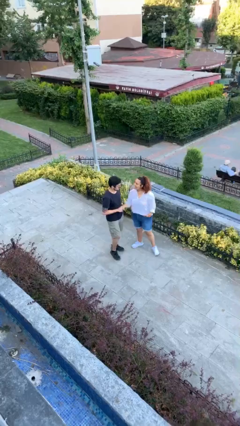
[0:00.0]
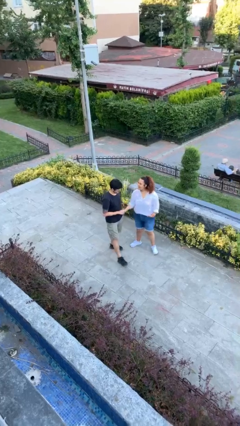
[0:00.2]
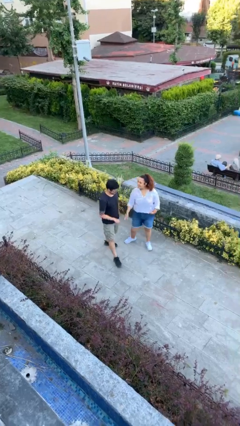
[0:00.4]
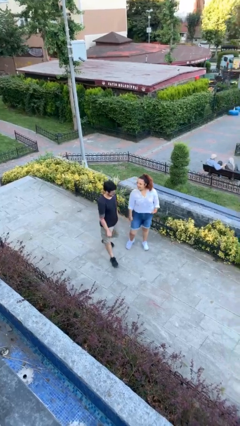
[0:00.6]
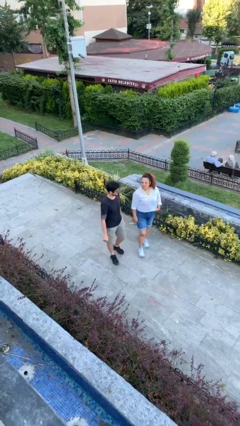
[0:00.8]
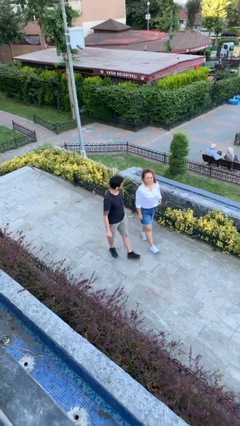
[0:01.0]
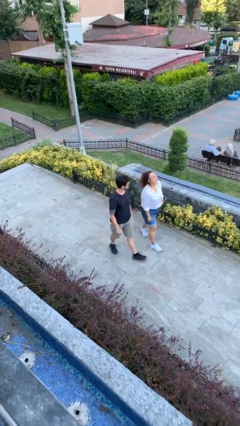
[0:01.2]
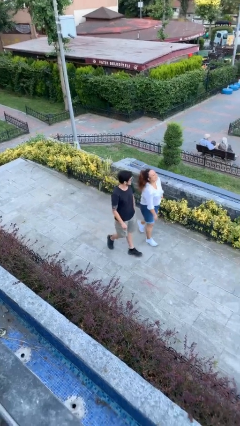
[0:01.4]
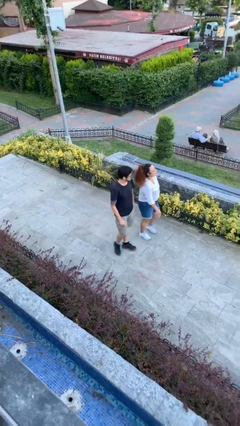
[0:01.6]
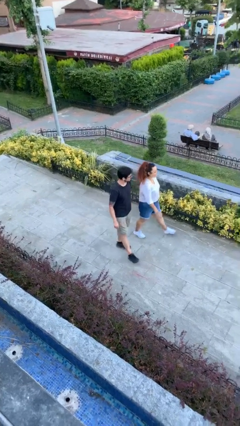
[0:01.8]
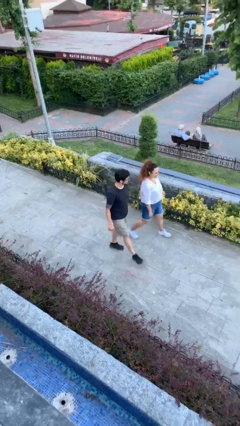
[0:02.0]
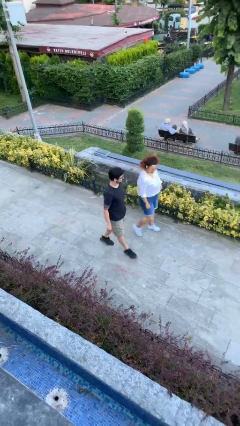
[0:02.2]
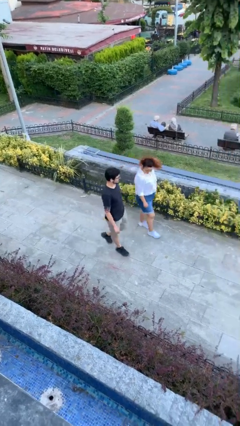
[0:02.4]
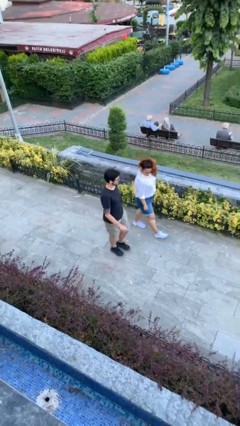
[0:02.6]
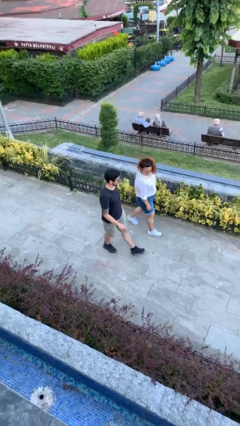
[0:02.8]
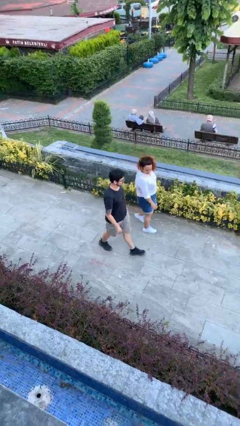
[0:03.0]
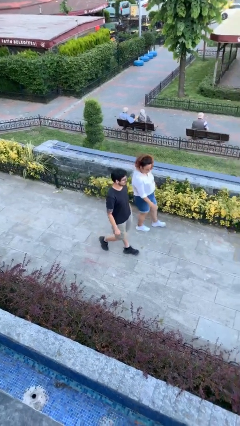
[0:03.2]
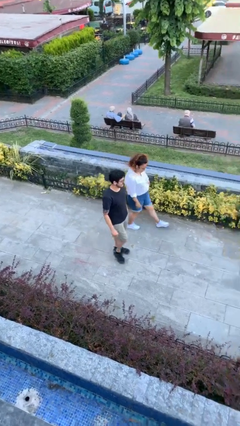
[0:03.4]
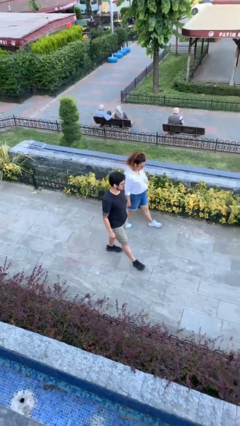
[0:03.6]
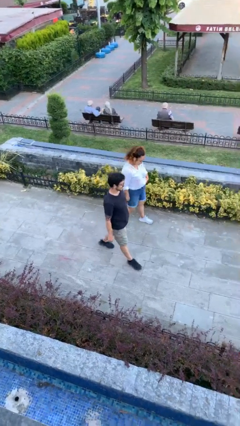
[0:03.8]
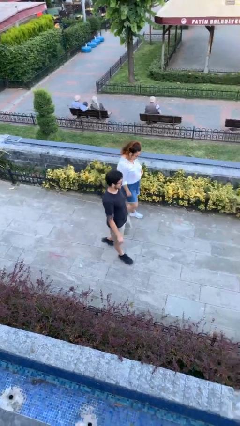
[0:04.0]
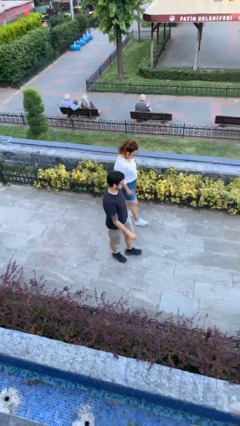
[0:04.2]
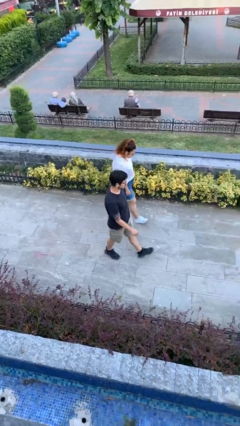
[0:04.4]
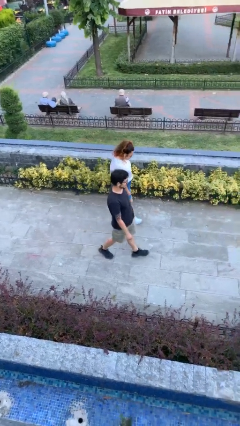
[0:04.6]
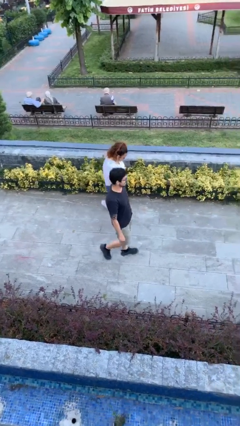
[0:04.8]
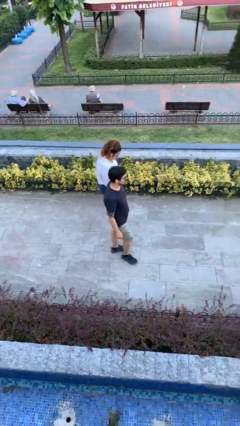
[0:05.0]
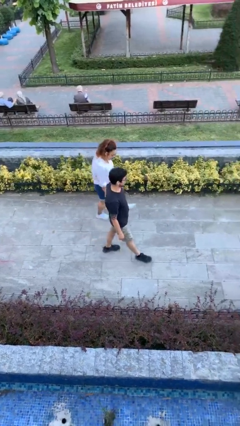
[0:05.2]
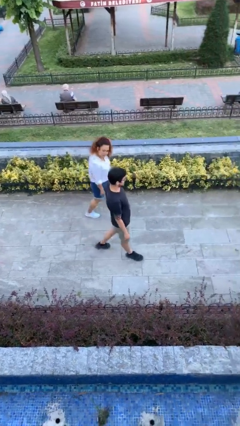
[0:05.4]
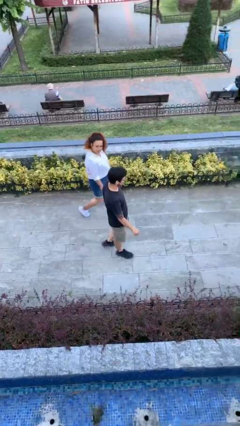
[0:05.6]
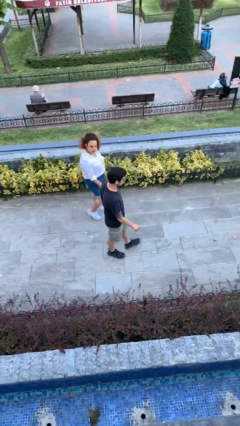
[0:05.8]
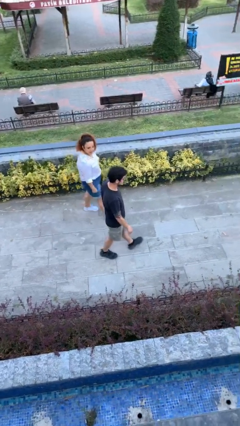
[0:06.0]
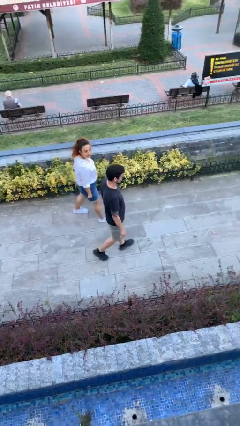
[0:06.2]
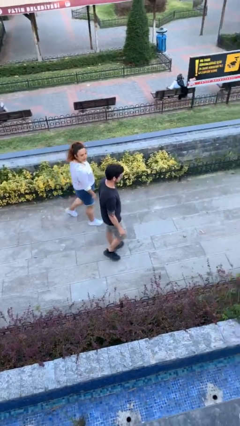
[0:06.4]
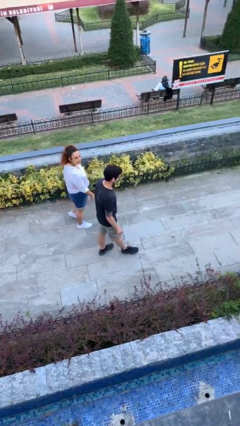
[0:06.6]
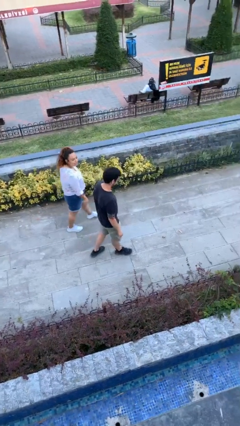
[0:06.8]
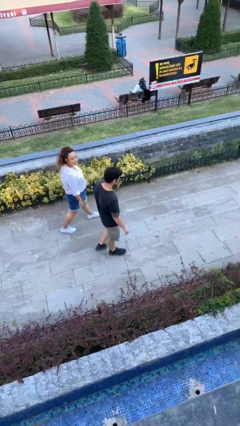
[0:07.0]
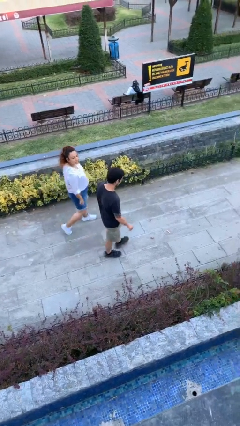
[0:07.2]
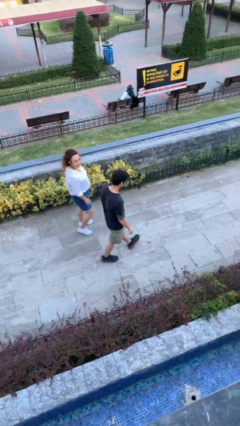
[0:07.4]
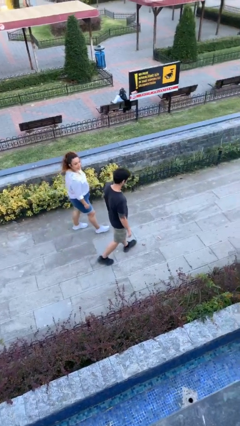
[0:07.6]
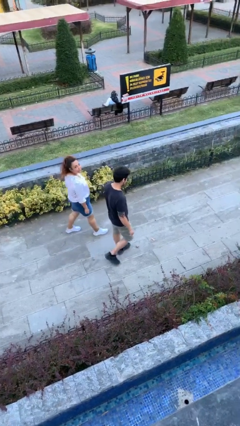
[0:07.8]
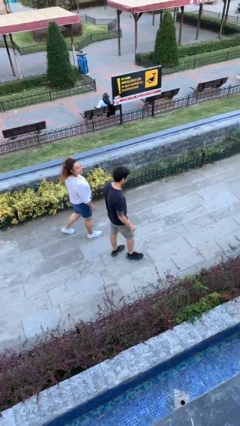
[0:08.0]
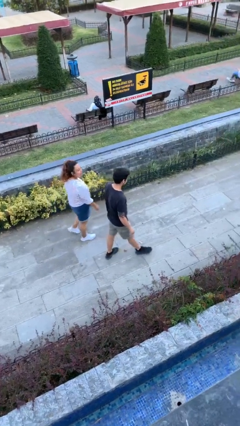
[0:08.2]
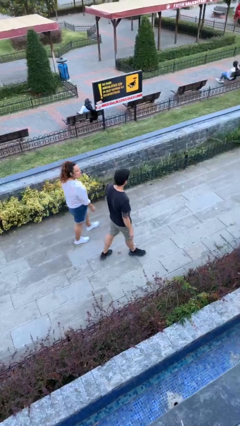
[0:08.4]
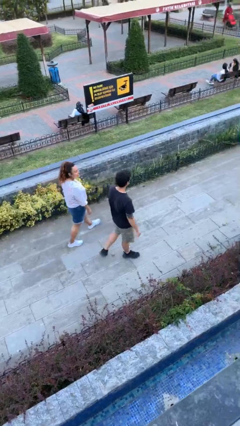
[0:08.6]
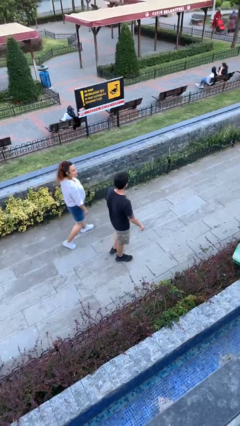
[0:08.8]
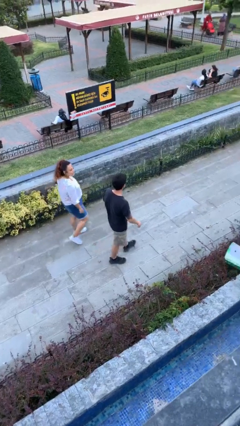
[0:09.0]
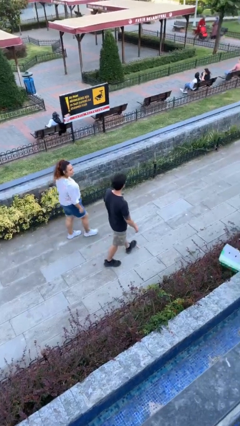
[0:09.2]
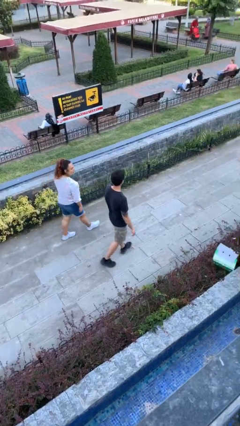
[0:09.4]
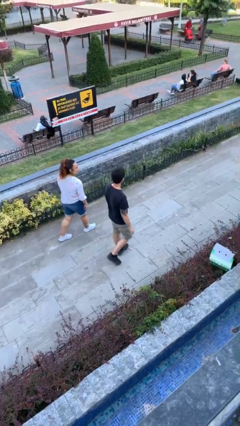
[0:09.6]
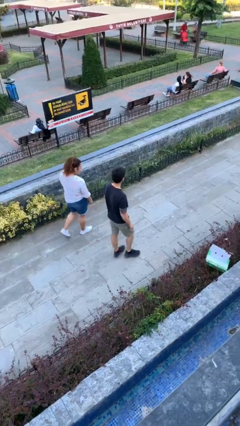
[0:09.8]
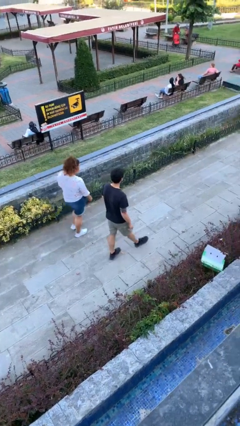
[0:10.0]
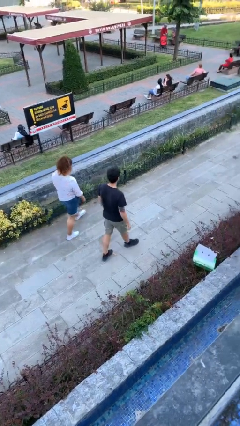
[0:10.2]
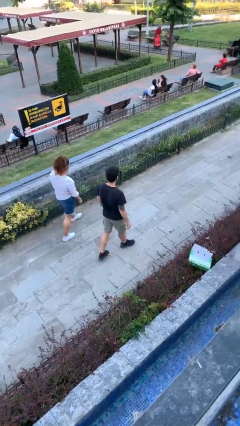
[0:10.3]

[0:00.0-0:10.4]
person talks to person

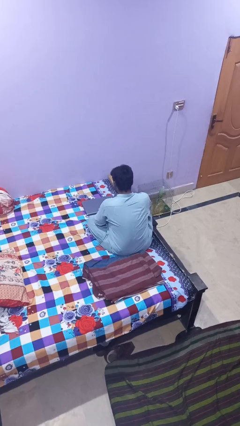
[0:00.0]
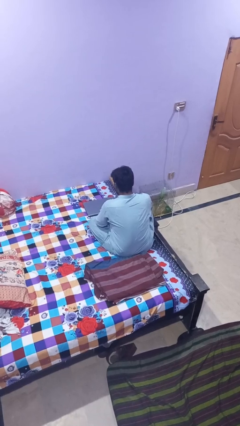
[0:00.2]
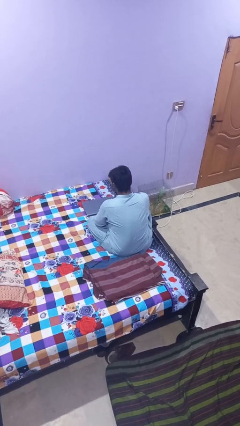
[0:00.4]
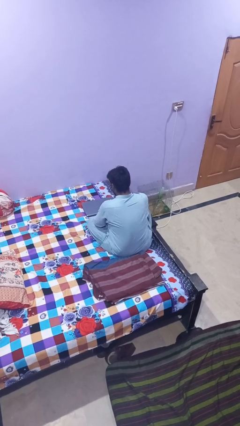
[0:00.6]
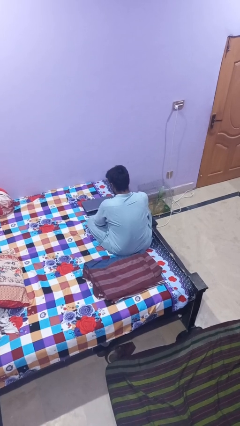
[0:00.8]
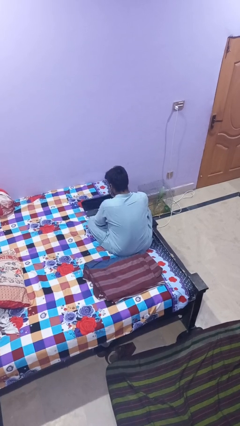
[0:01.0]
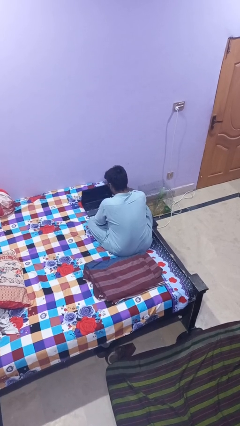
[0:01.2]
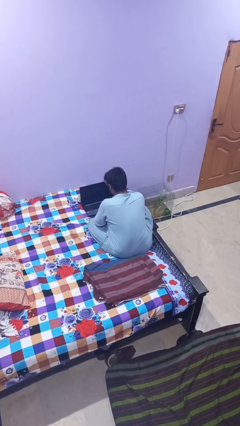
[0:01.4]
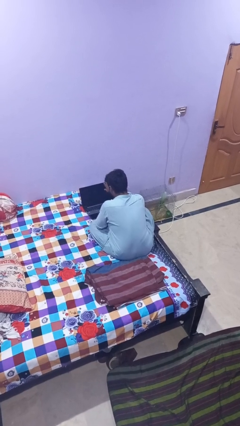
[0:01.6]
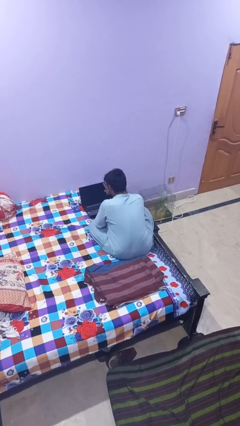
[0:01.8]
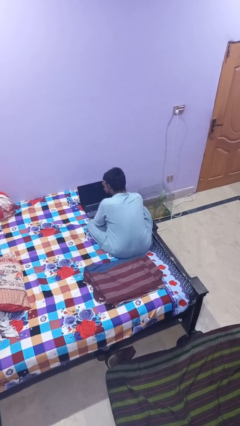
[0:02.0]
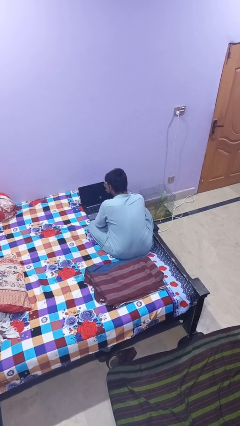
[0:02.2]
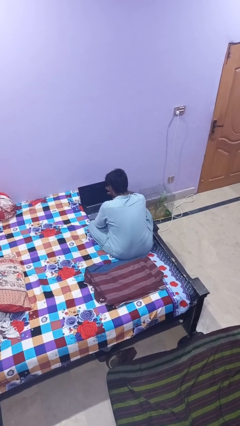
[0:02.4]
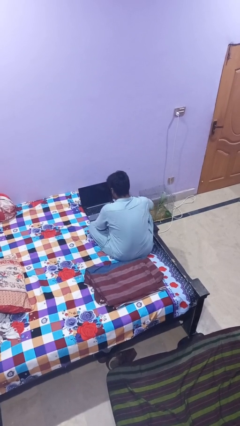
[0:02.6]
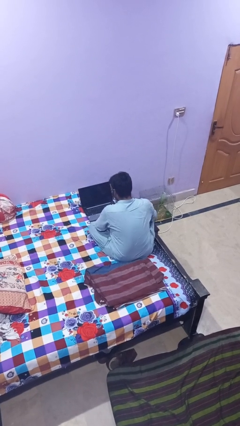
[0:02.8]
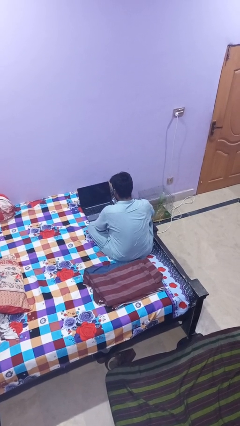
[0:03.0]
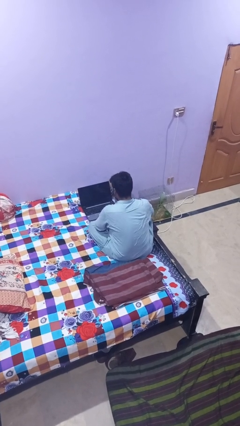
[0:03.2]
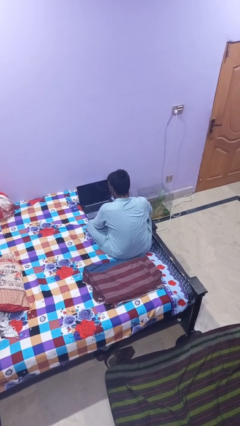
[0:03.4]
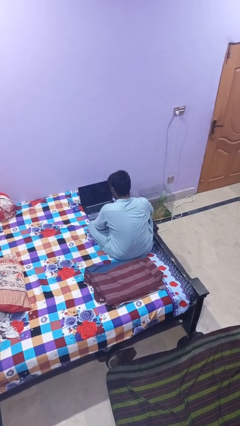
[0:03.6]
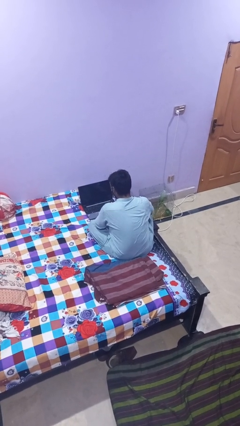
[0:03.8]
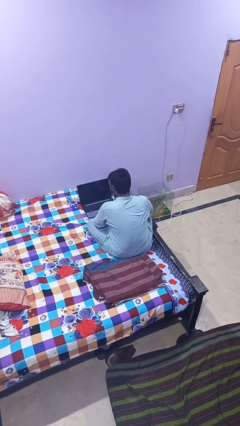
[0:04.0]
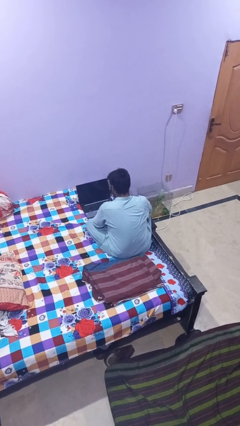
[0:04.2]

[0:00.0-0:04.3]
person opens laptop

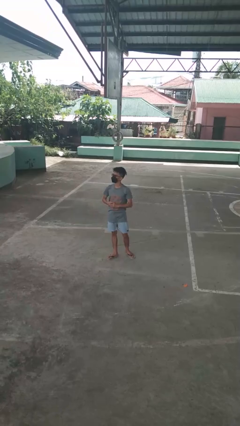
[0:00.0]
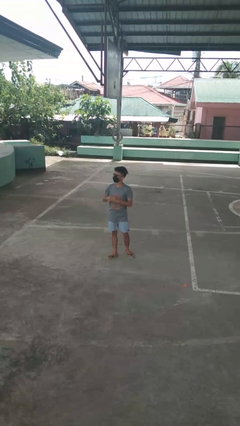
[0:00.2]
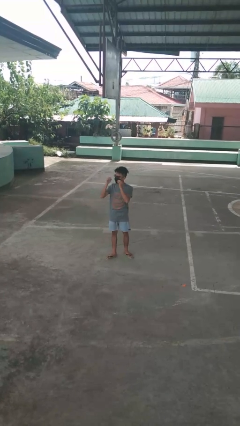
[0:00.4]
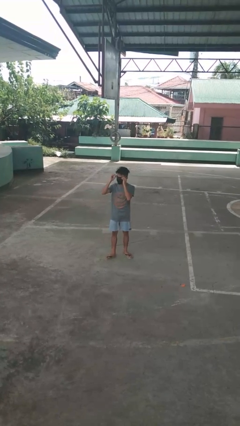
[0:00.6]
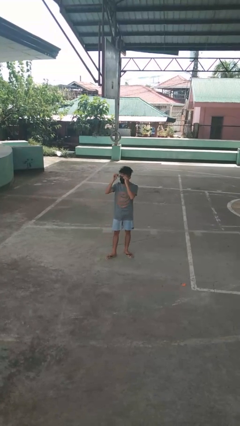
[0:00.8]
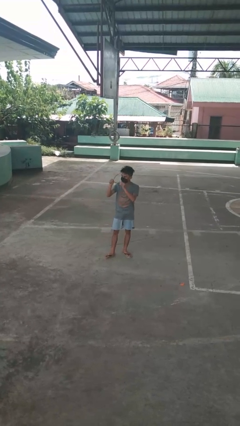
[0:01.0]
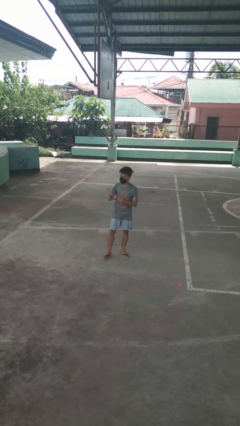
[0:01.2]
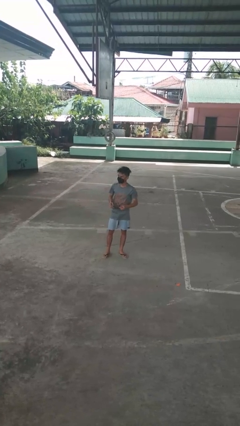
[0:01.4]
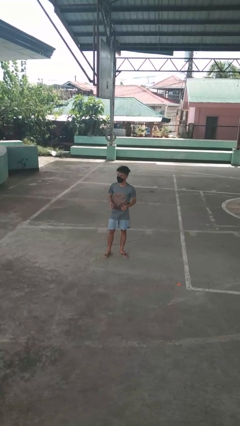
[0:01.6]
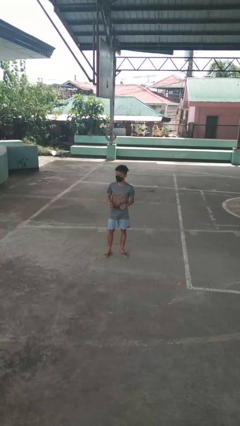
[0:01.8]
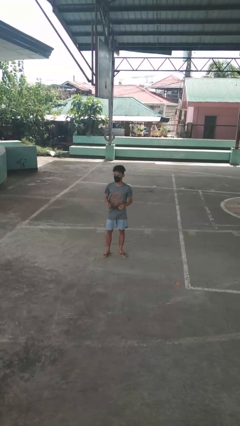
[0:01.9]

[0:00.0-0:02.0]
person takes off glasses

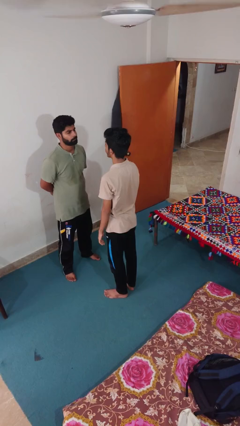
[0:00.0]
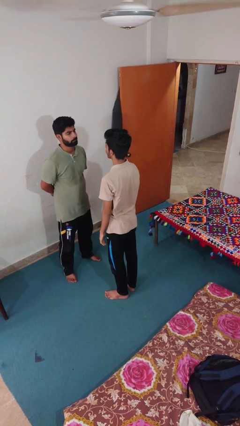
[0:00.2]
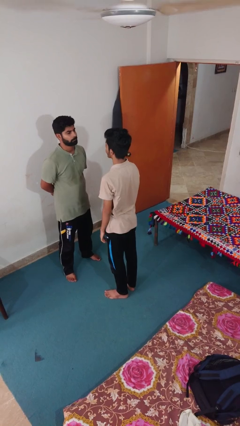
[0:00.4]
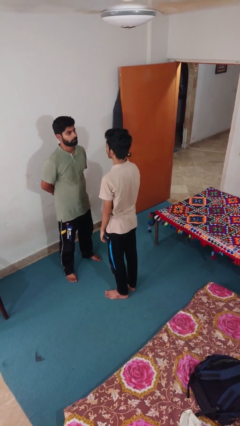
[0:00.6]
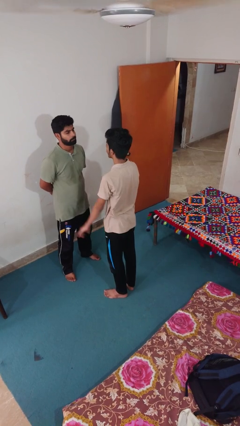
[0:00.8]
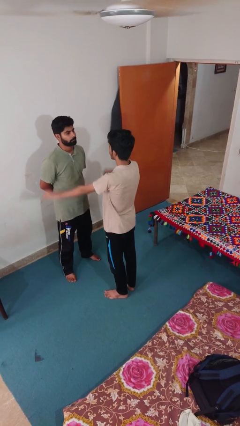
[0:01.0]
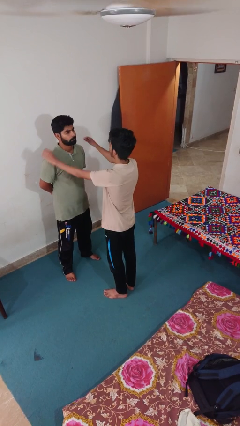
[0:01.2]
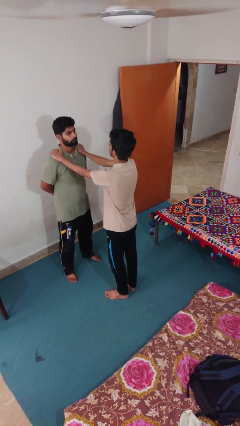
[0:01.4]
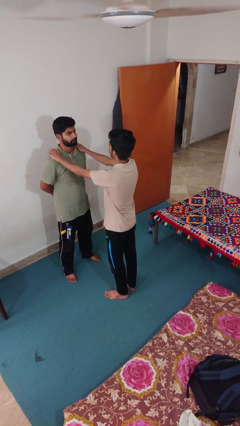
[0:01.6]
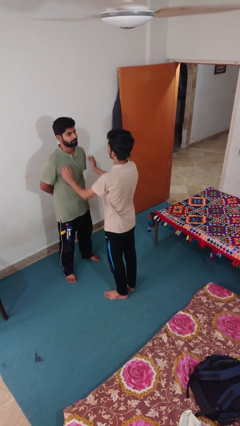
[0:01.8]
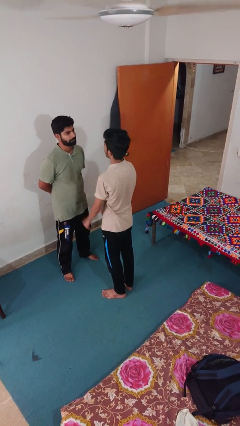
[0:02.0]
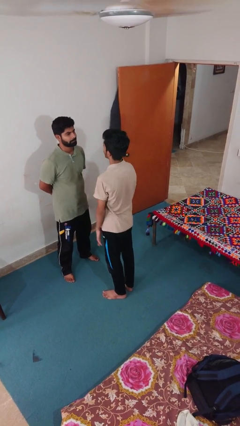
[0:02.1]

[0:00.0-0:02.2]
person pounds shoulders of person
